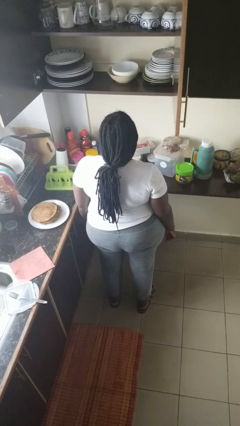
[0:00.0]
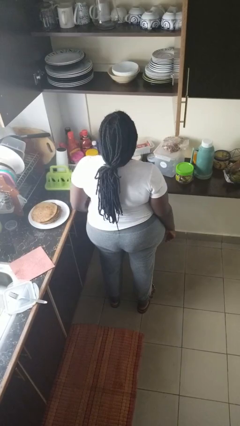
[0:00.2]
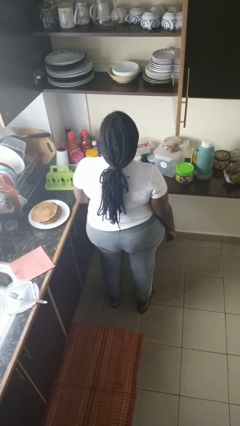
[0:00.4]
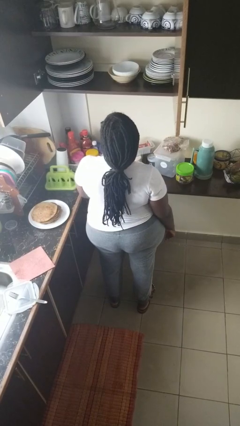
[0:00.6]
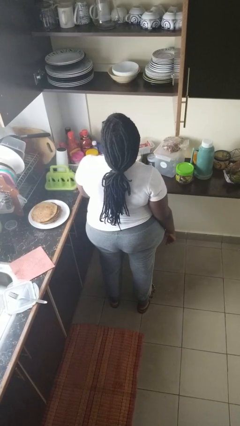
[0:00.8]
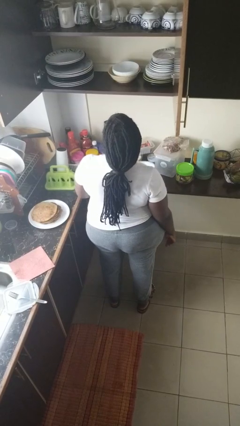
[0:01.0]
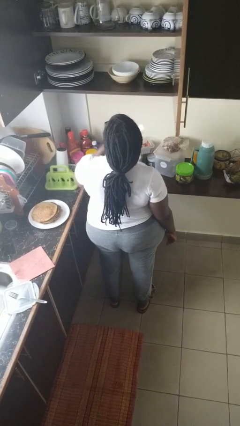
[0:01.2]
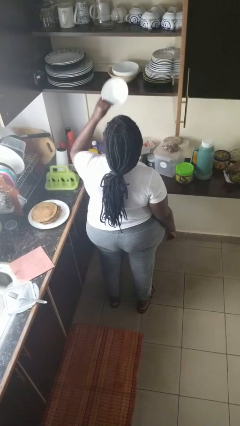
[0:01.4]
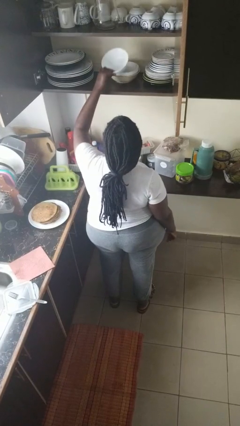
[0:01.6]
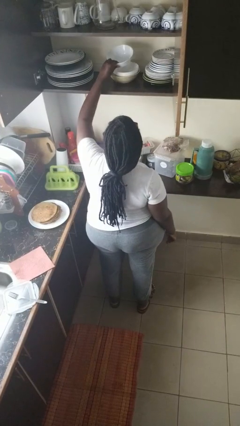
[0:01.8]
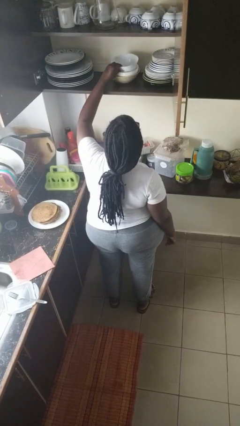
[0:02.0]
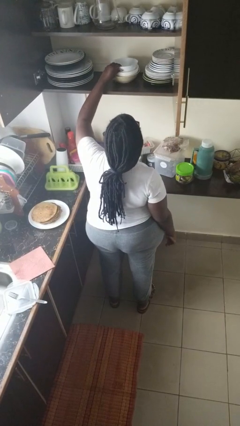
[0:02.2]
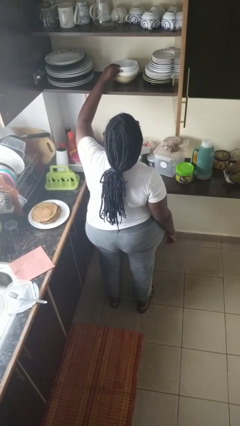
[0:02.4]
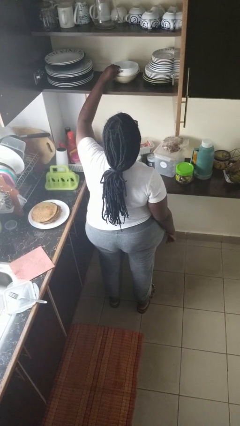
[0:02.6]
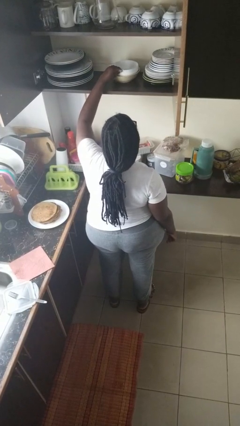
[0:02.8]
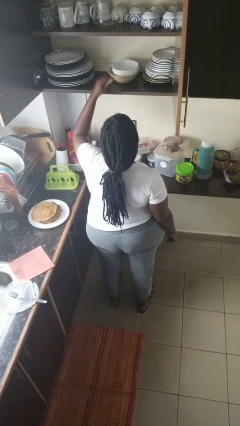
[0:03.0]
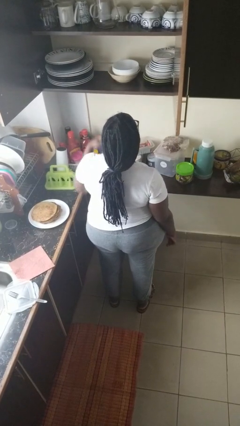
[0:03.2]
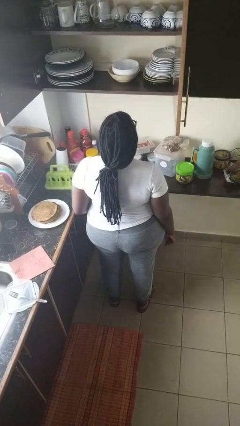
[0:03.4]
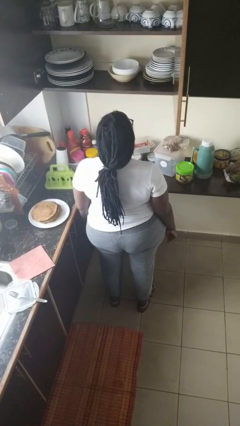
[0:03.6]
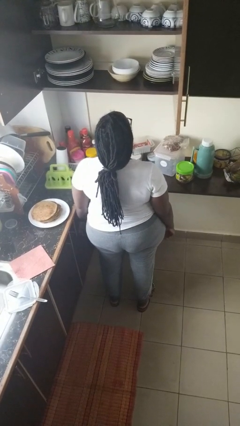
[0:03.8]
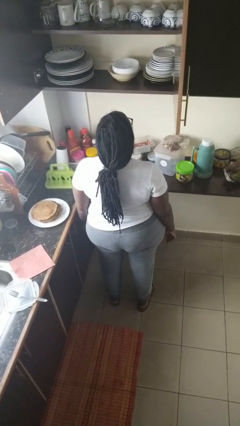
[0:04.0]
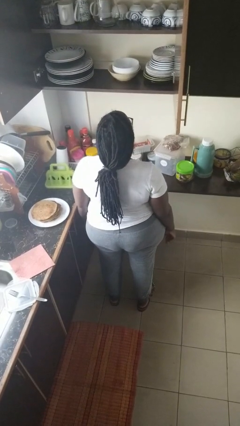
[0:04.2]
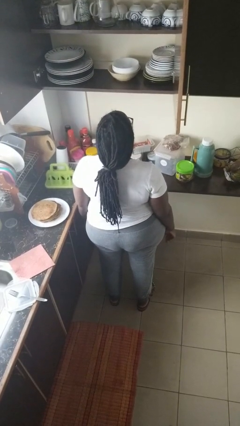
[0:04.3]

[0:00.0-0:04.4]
person puts object in cabinet

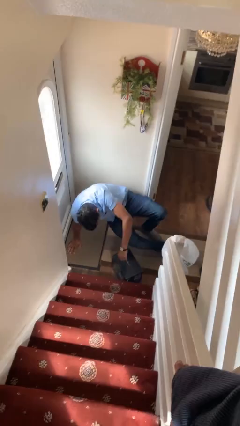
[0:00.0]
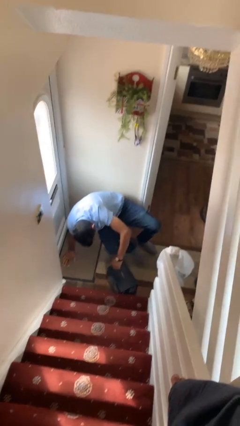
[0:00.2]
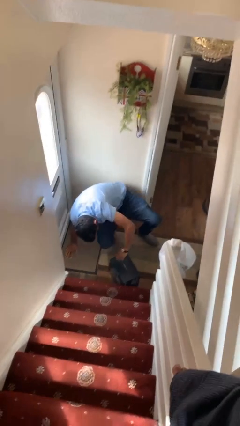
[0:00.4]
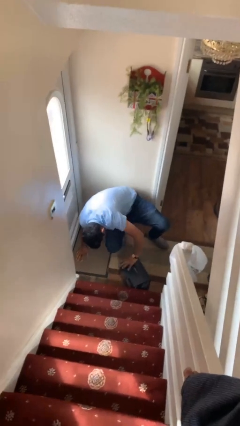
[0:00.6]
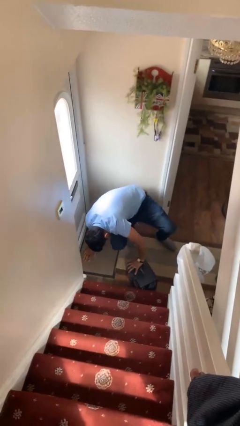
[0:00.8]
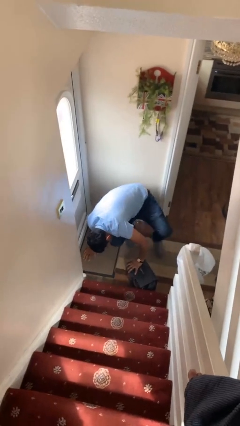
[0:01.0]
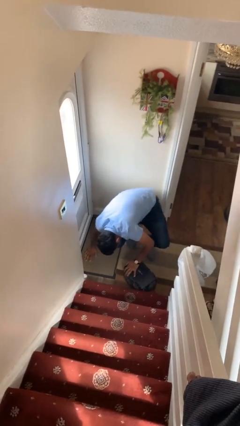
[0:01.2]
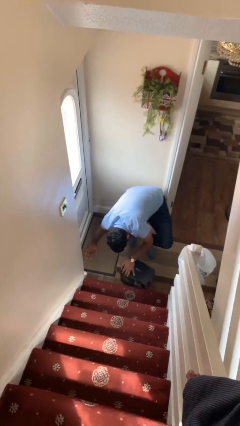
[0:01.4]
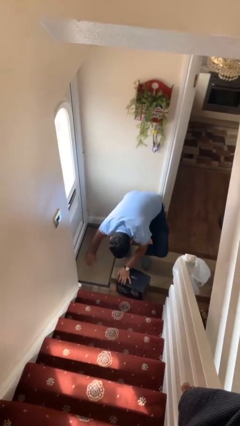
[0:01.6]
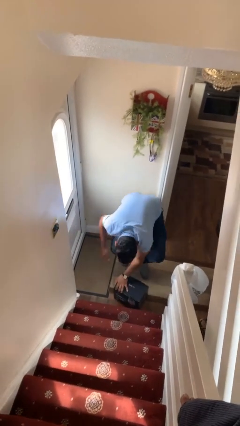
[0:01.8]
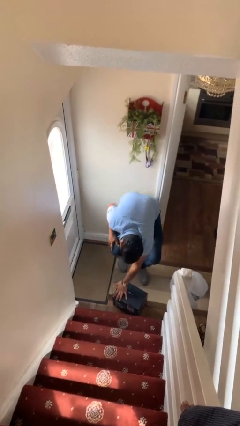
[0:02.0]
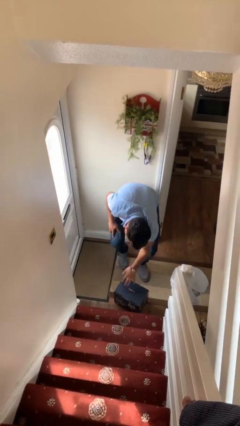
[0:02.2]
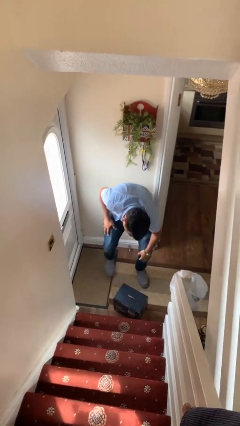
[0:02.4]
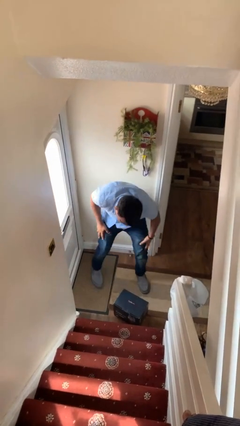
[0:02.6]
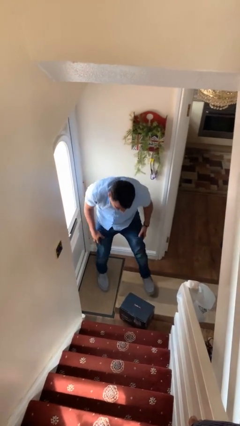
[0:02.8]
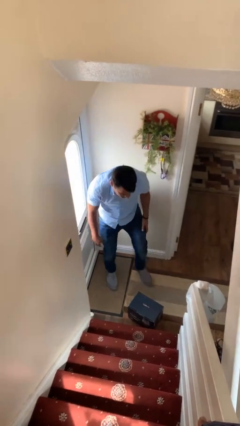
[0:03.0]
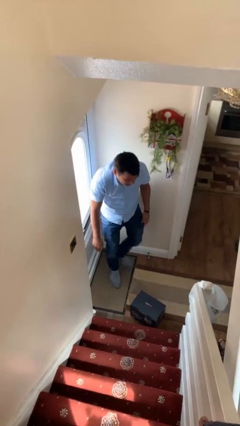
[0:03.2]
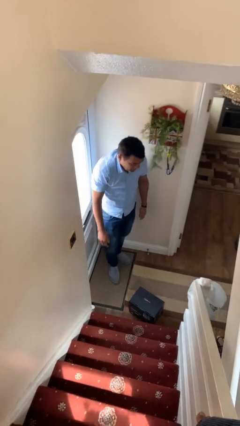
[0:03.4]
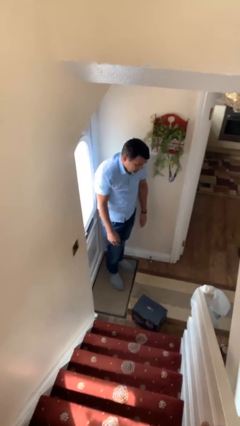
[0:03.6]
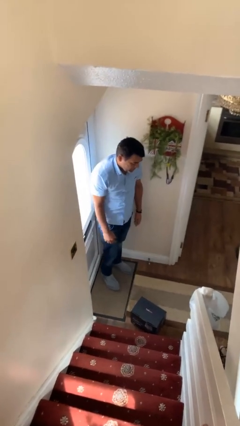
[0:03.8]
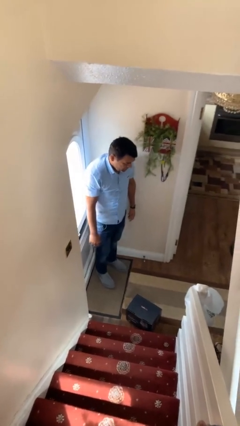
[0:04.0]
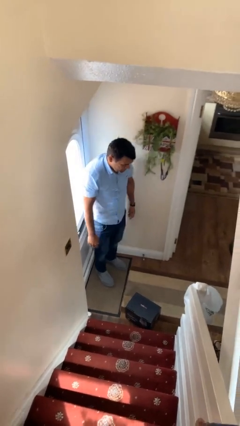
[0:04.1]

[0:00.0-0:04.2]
person stands up from floor

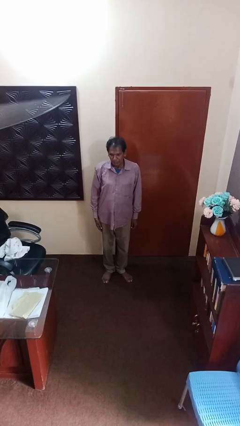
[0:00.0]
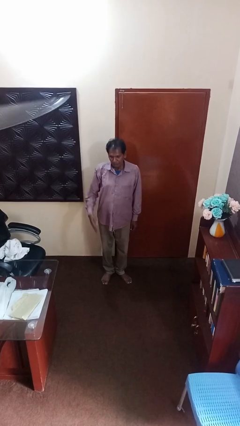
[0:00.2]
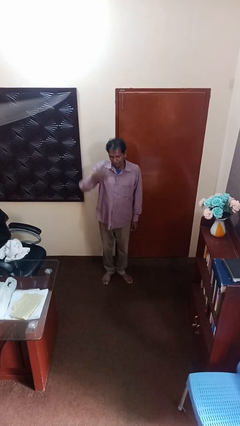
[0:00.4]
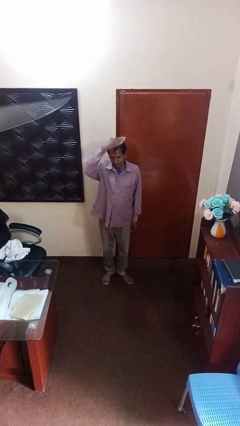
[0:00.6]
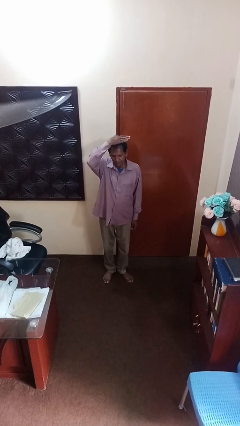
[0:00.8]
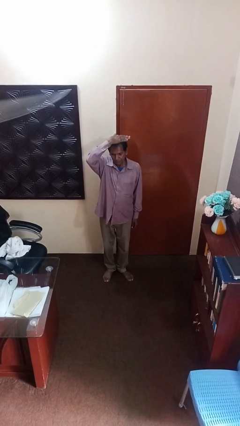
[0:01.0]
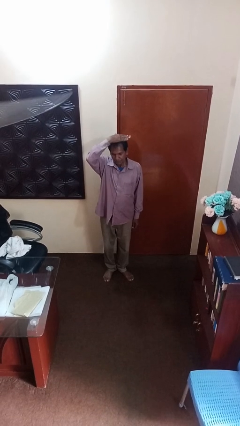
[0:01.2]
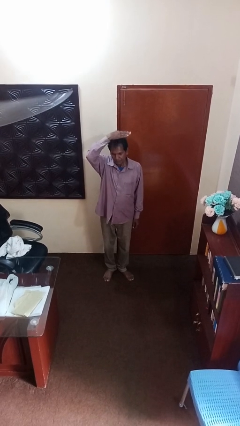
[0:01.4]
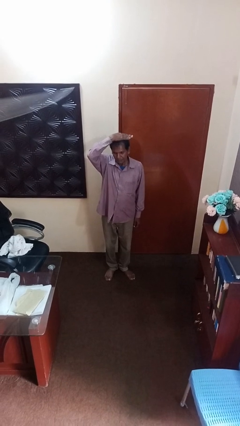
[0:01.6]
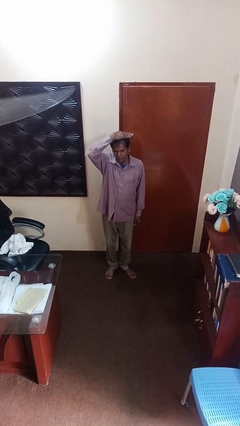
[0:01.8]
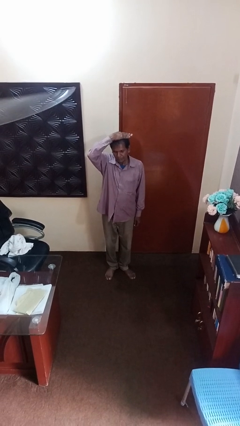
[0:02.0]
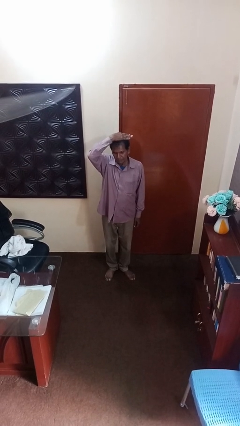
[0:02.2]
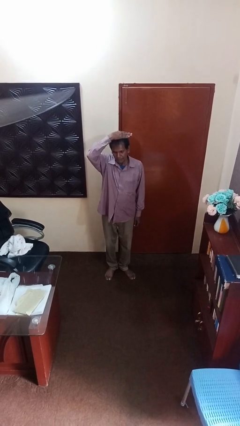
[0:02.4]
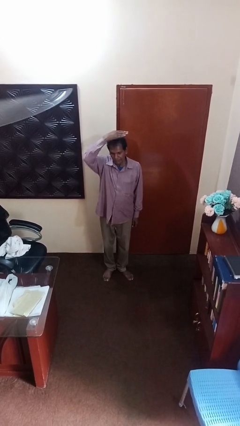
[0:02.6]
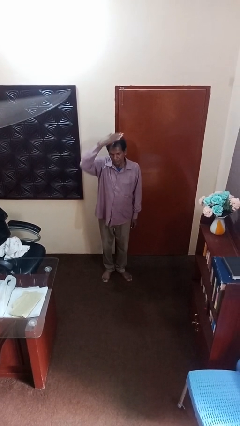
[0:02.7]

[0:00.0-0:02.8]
person pats head

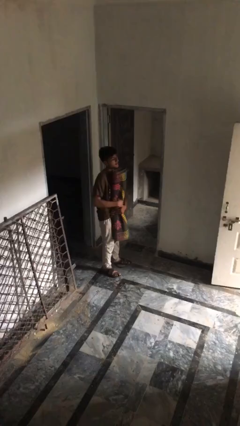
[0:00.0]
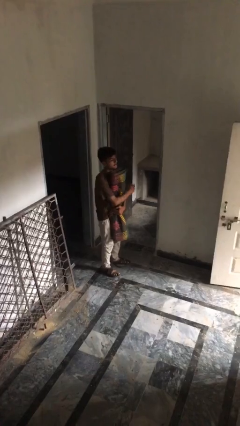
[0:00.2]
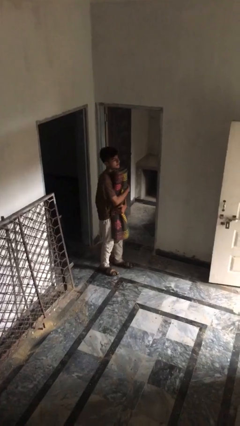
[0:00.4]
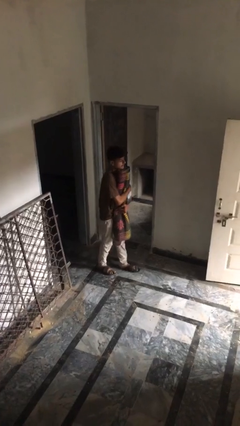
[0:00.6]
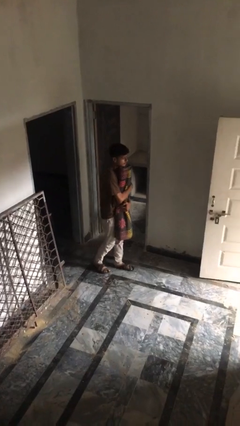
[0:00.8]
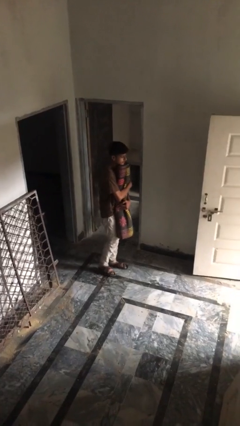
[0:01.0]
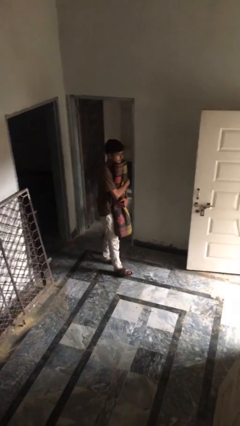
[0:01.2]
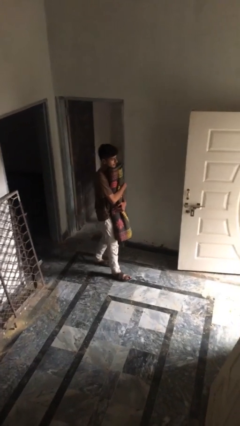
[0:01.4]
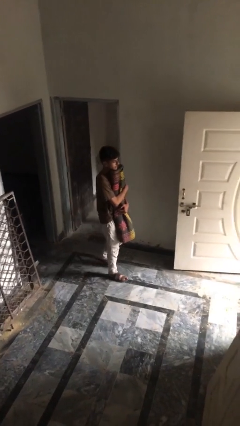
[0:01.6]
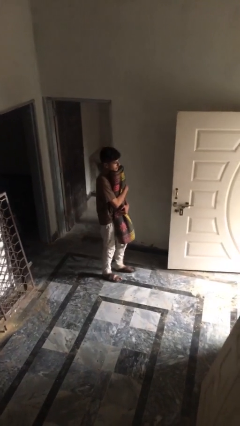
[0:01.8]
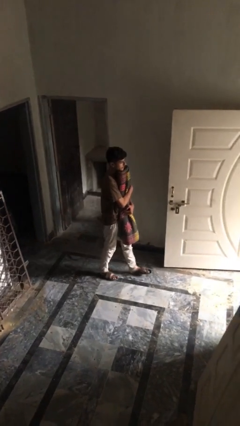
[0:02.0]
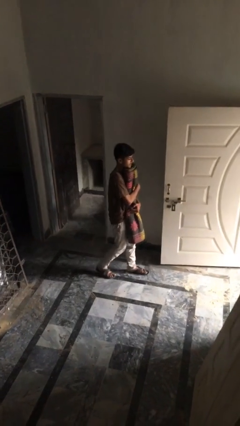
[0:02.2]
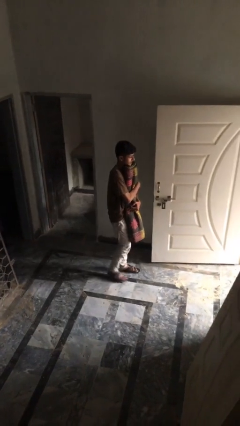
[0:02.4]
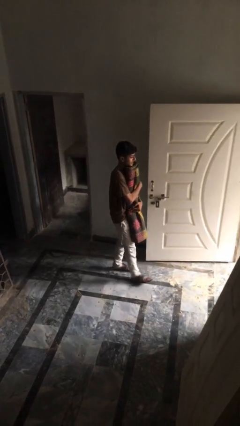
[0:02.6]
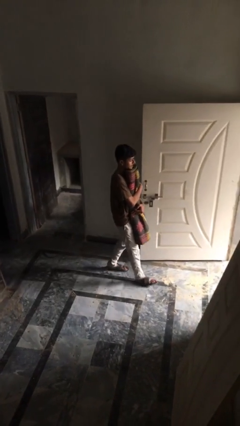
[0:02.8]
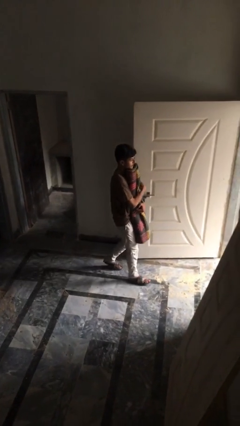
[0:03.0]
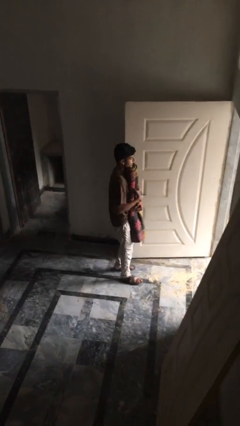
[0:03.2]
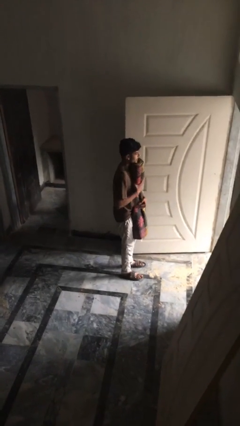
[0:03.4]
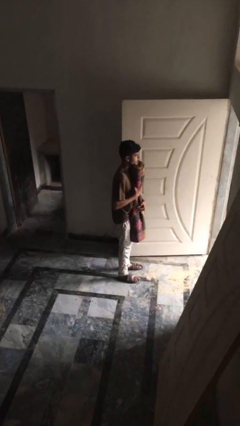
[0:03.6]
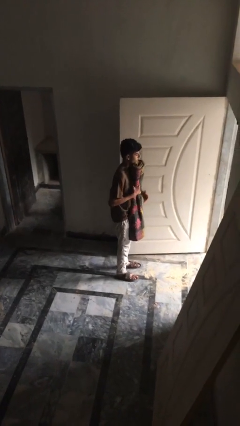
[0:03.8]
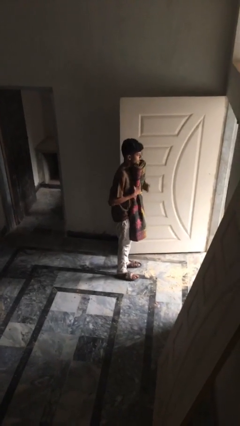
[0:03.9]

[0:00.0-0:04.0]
person carries heavy object

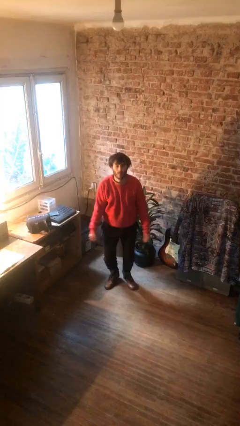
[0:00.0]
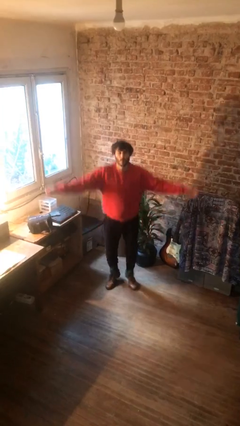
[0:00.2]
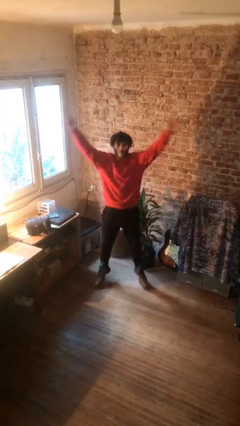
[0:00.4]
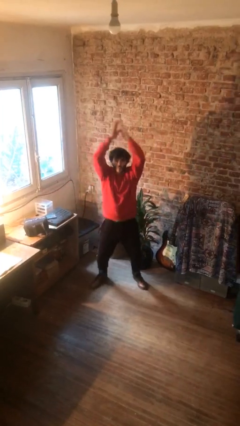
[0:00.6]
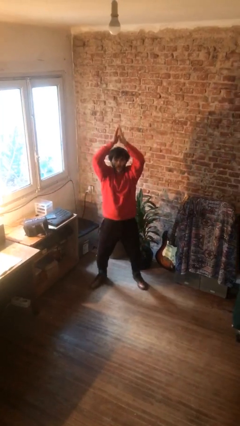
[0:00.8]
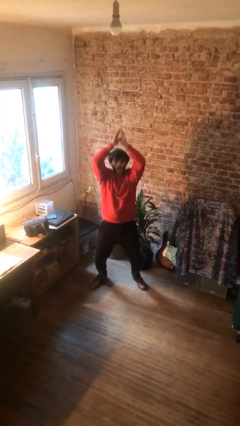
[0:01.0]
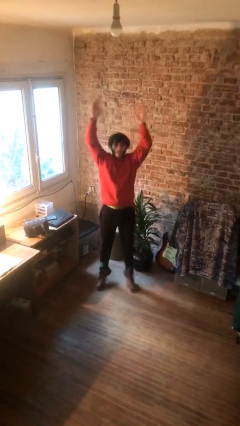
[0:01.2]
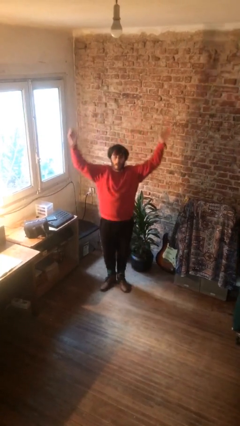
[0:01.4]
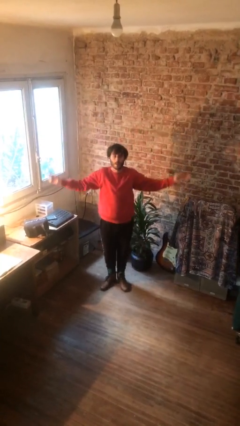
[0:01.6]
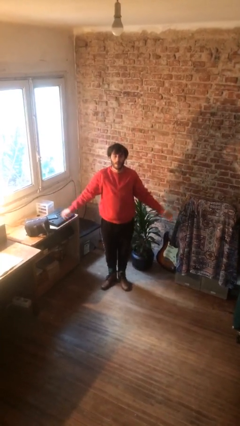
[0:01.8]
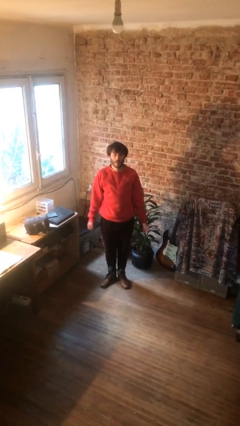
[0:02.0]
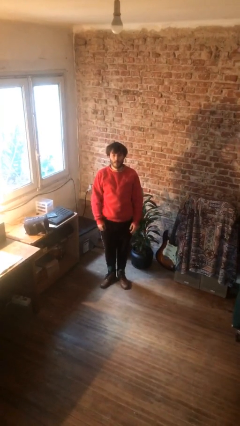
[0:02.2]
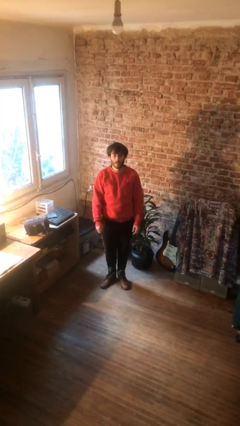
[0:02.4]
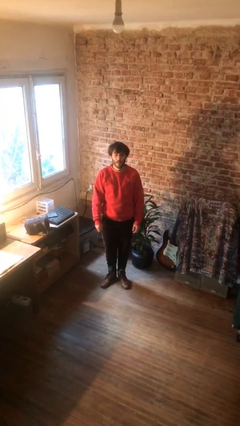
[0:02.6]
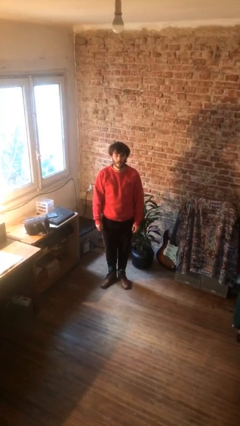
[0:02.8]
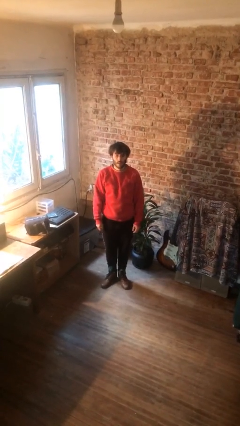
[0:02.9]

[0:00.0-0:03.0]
person exercises with jumping jacks
